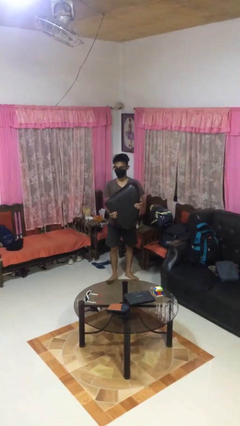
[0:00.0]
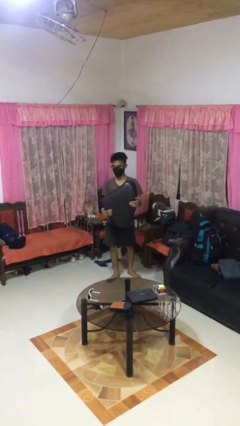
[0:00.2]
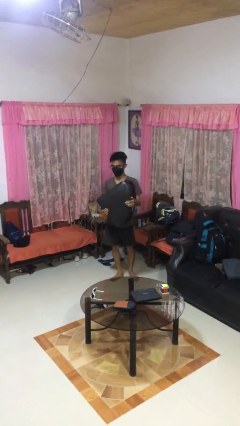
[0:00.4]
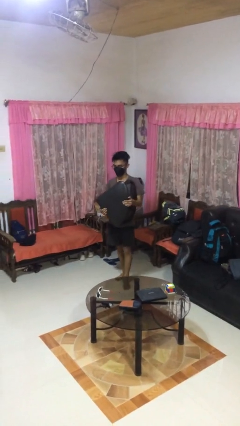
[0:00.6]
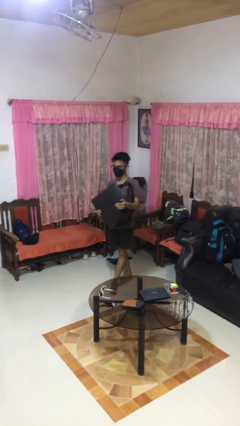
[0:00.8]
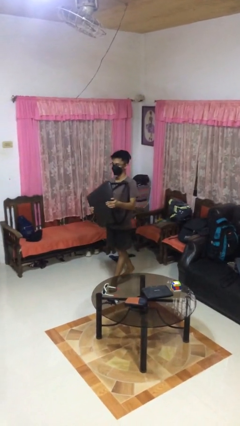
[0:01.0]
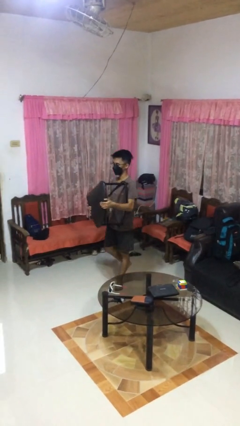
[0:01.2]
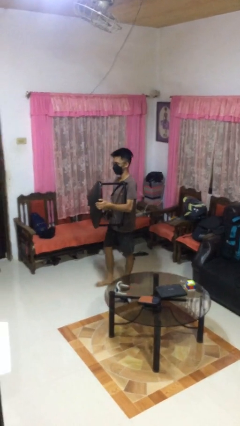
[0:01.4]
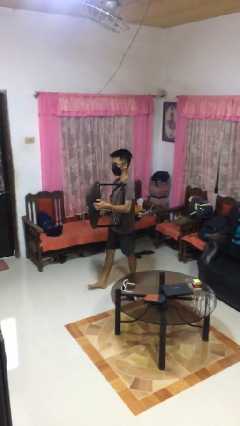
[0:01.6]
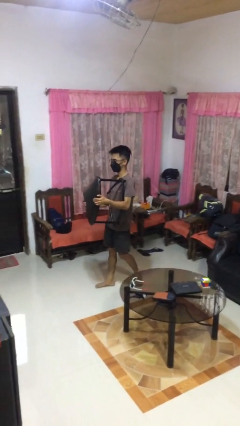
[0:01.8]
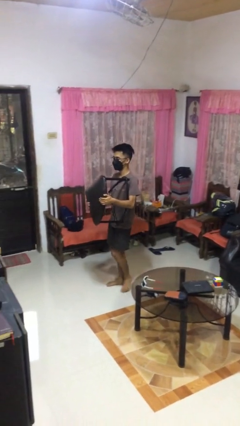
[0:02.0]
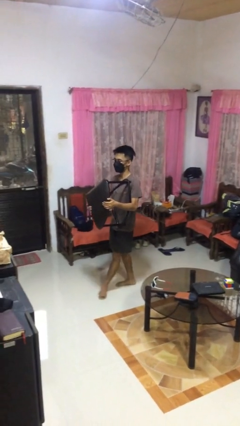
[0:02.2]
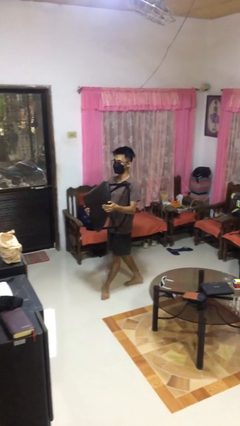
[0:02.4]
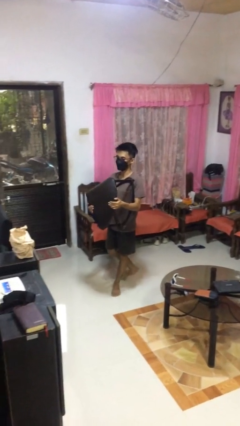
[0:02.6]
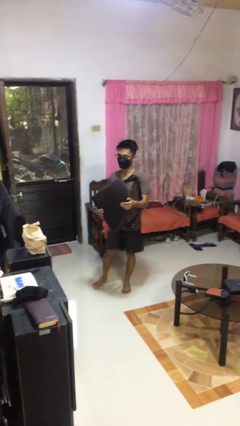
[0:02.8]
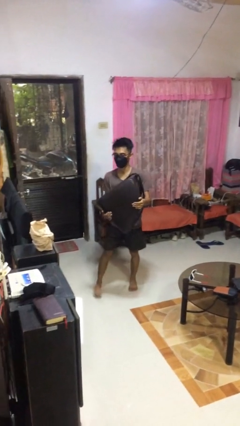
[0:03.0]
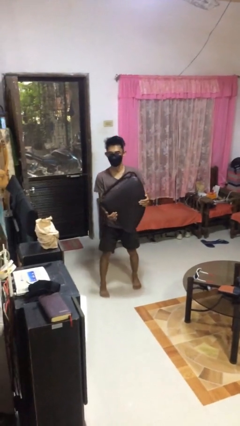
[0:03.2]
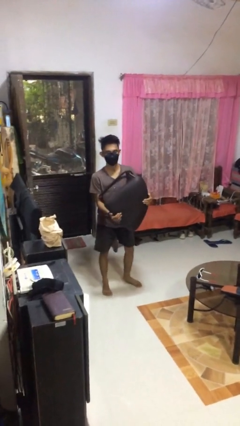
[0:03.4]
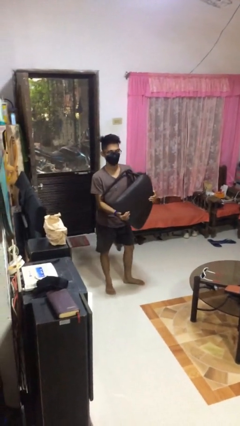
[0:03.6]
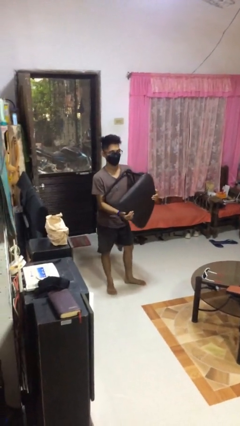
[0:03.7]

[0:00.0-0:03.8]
person carries furniture

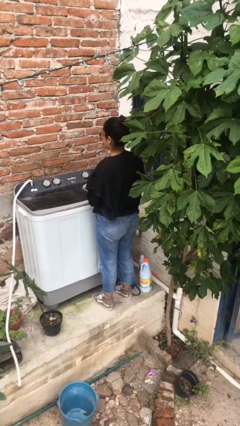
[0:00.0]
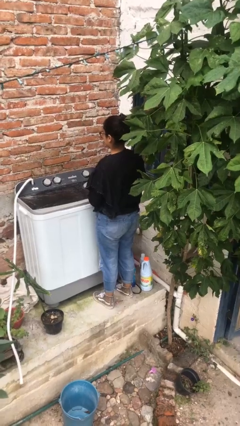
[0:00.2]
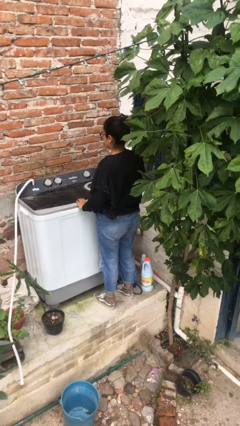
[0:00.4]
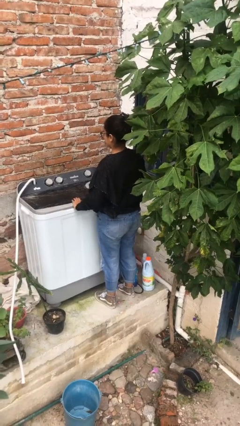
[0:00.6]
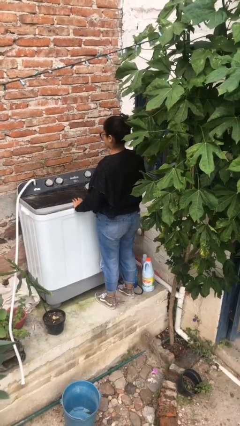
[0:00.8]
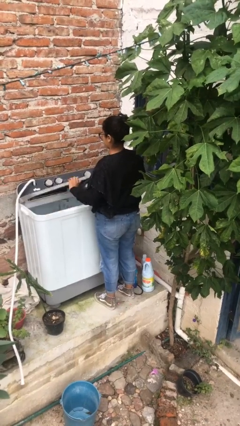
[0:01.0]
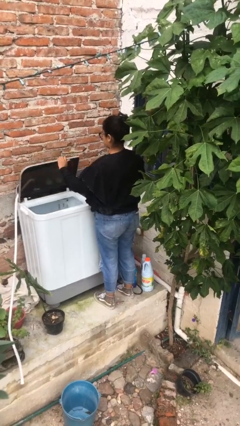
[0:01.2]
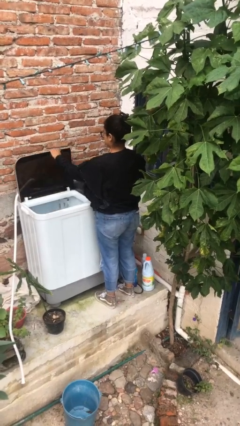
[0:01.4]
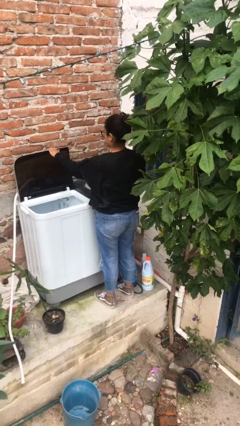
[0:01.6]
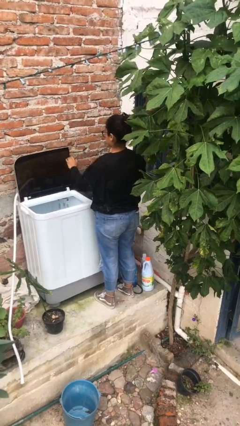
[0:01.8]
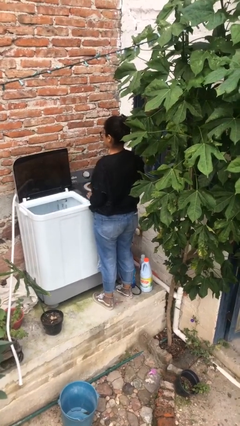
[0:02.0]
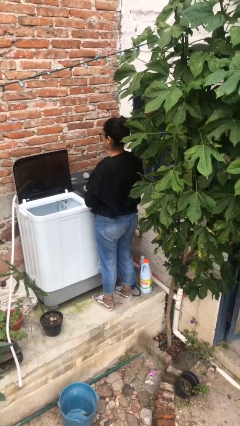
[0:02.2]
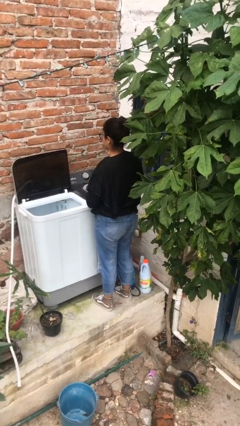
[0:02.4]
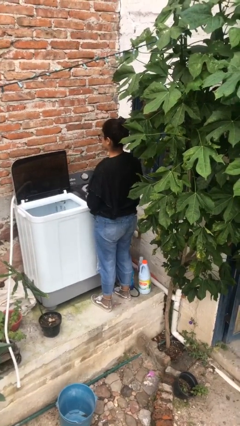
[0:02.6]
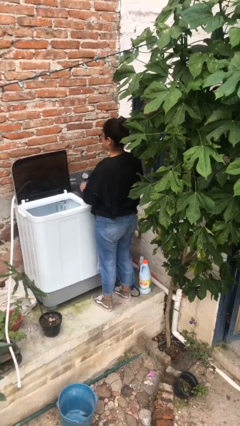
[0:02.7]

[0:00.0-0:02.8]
person opens clothes washer

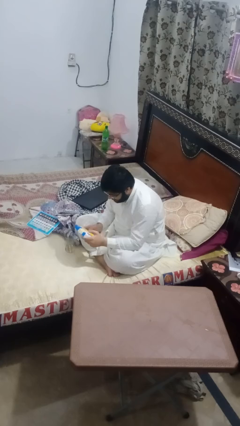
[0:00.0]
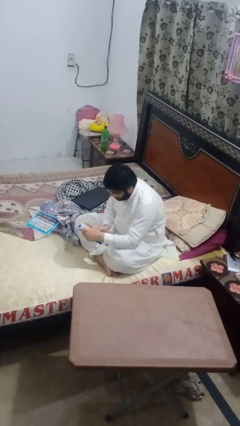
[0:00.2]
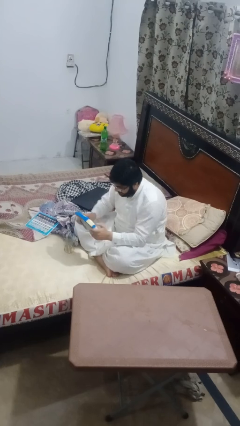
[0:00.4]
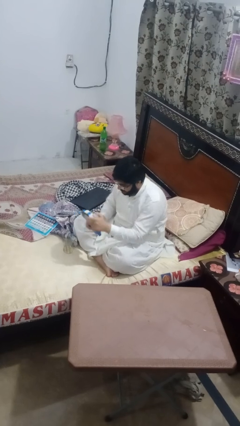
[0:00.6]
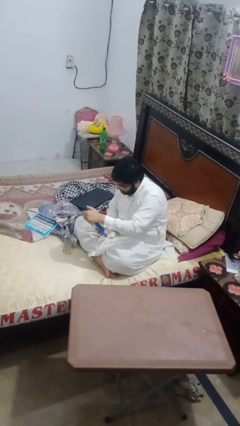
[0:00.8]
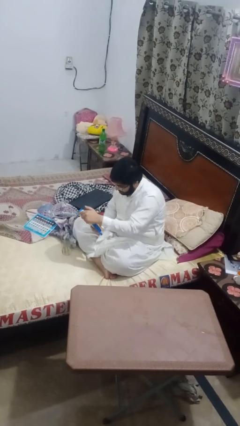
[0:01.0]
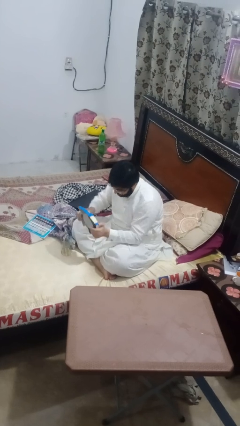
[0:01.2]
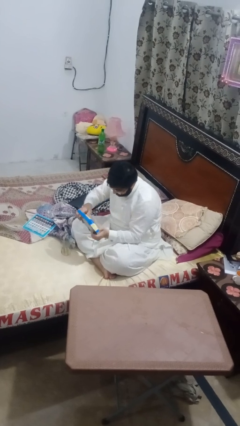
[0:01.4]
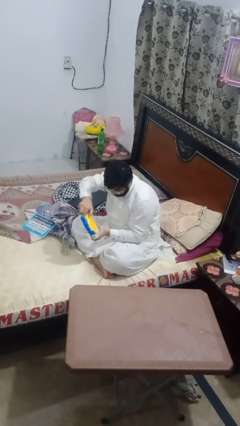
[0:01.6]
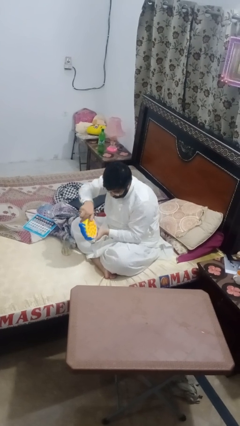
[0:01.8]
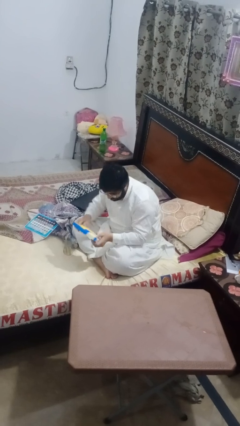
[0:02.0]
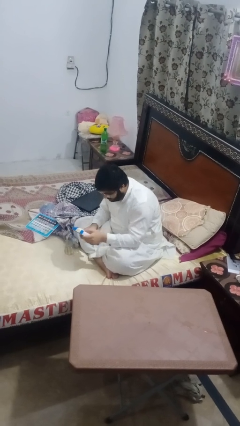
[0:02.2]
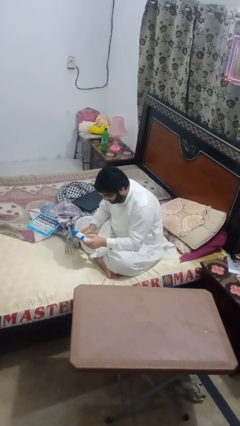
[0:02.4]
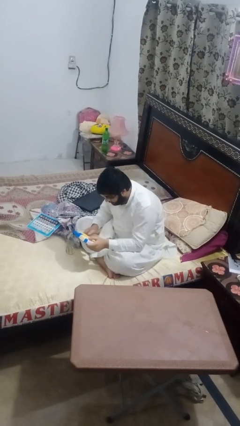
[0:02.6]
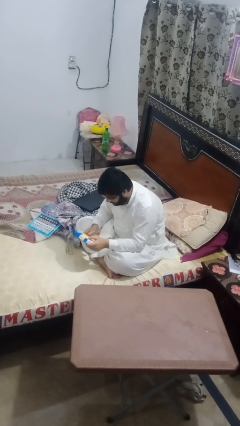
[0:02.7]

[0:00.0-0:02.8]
person interacts with handheld game

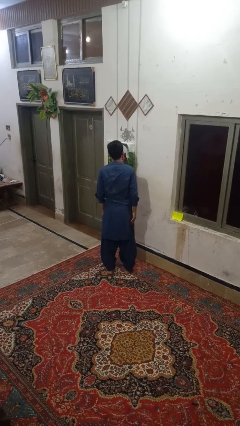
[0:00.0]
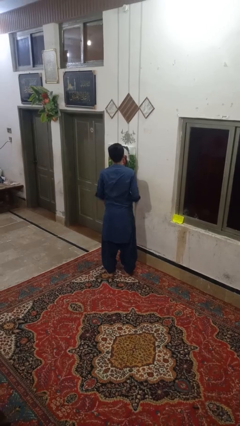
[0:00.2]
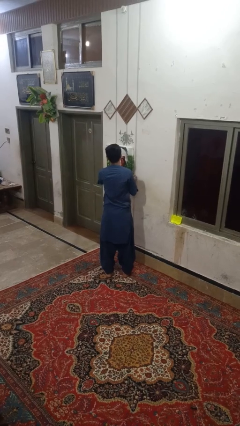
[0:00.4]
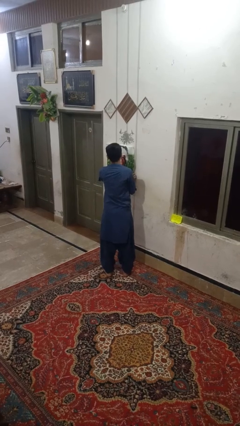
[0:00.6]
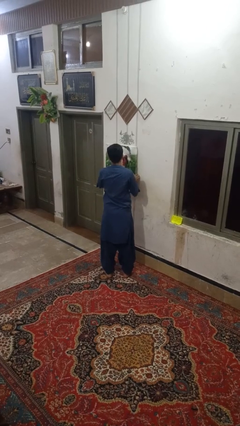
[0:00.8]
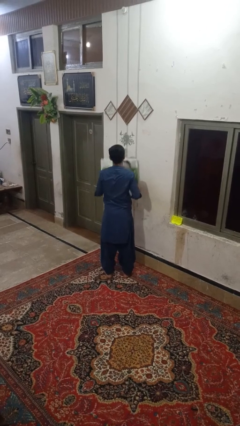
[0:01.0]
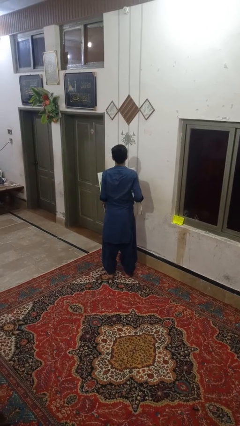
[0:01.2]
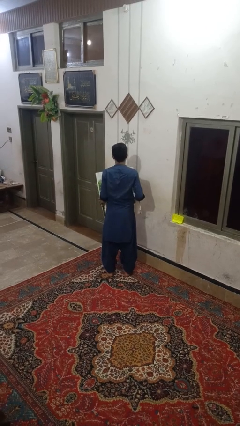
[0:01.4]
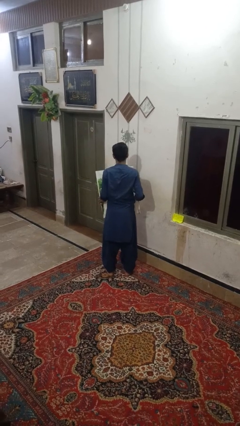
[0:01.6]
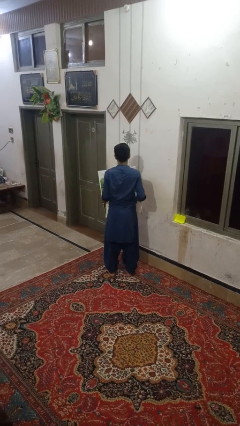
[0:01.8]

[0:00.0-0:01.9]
person takes down picture frame

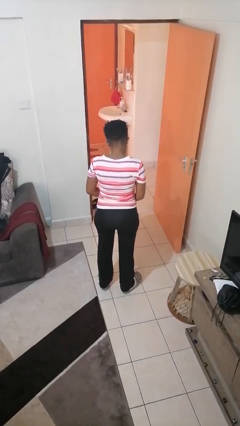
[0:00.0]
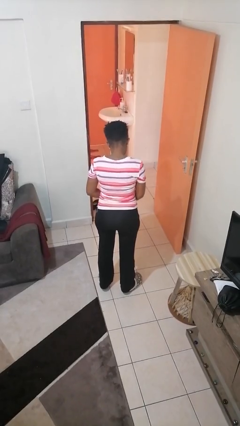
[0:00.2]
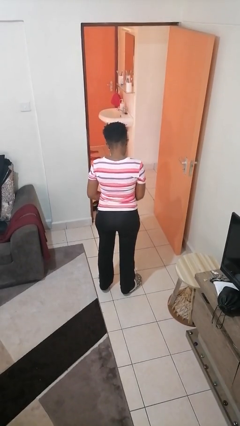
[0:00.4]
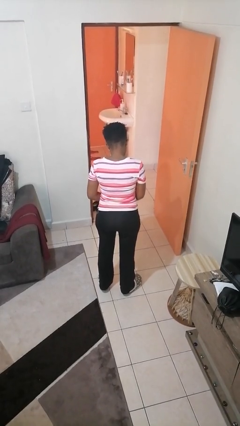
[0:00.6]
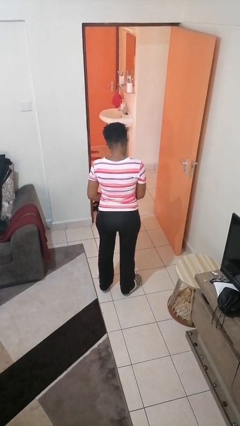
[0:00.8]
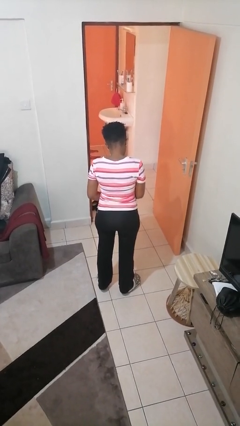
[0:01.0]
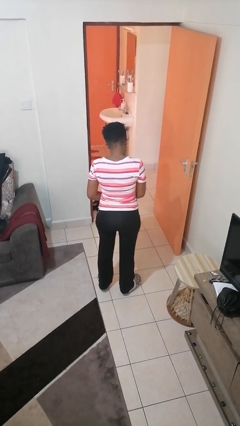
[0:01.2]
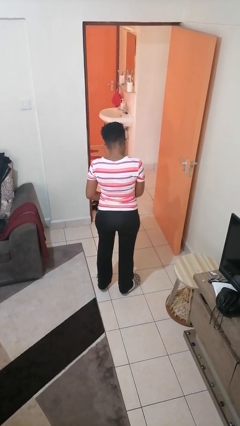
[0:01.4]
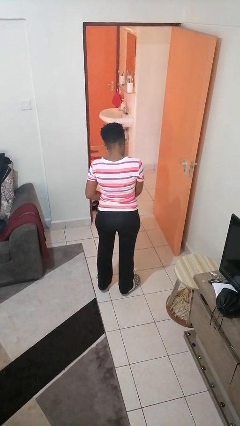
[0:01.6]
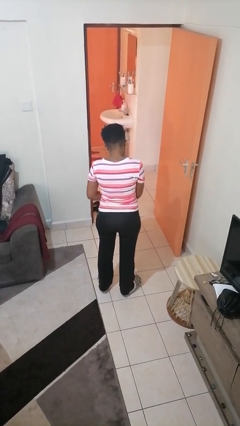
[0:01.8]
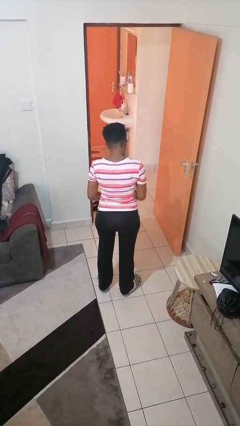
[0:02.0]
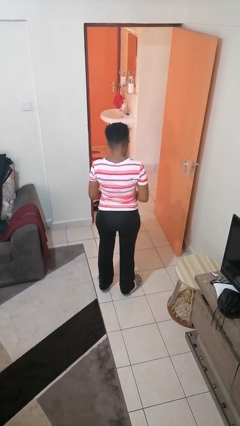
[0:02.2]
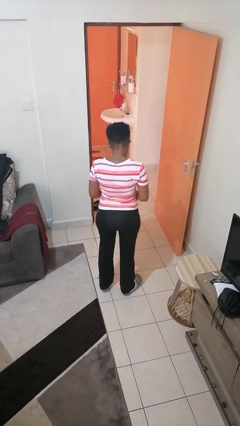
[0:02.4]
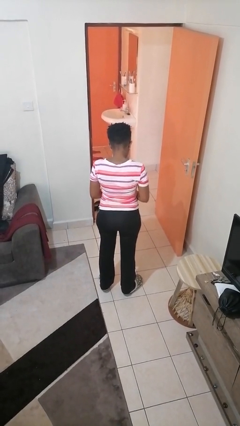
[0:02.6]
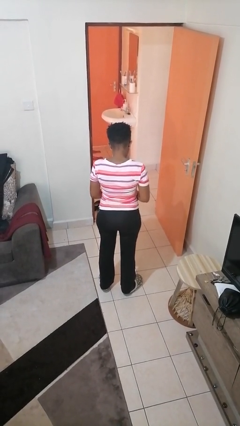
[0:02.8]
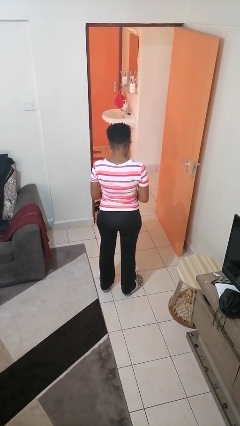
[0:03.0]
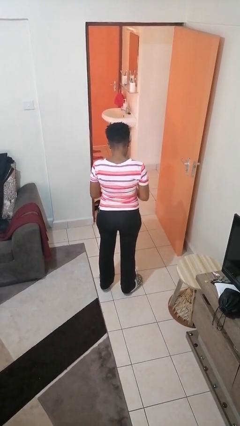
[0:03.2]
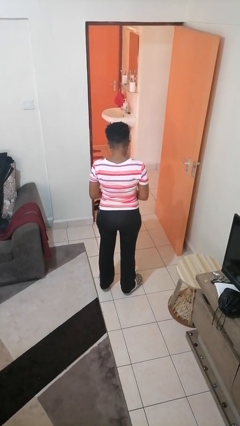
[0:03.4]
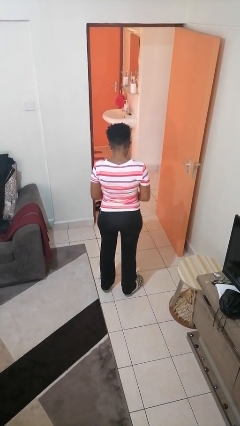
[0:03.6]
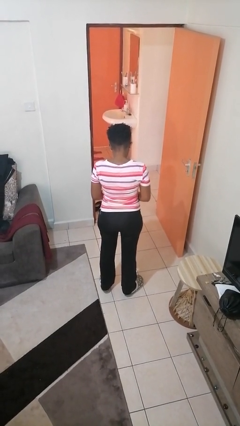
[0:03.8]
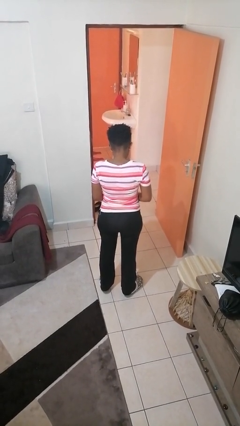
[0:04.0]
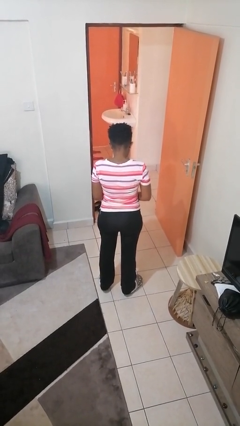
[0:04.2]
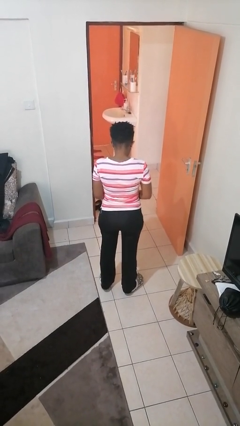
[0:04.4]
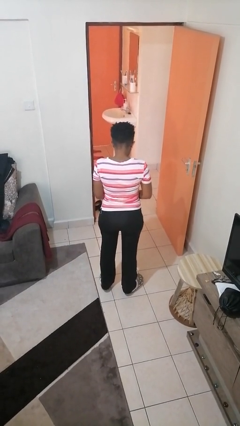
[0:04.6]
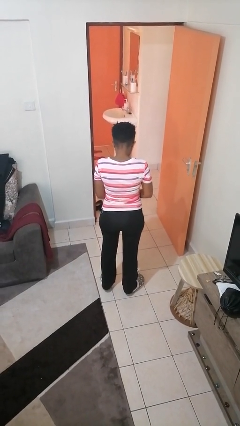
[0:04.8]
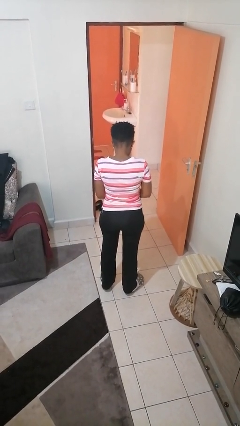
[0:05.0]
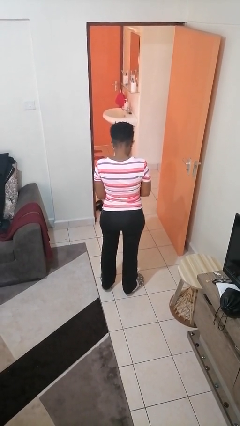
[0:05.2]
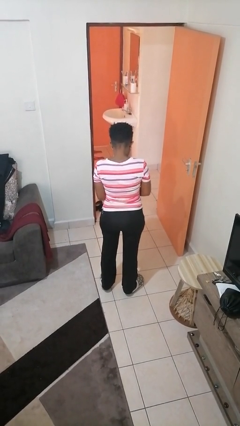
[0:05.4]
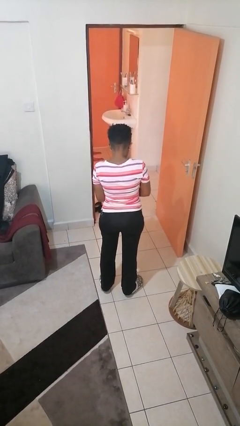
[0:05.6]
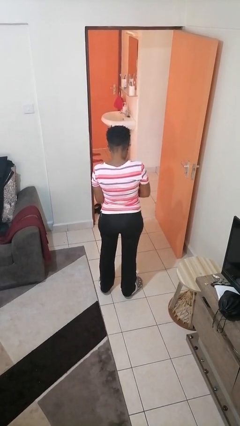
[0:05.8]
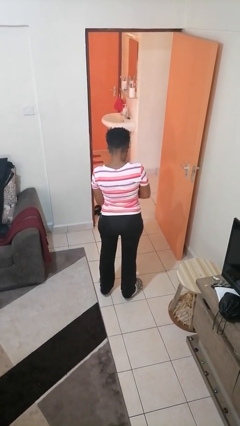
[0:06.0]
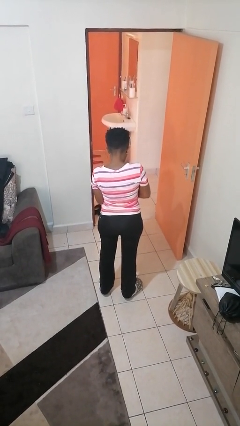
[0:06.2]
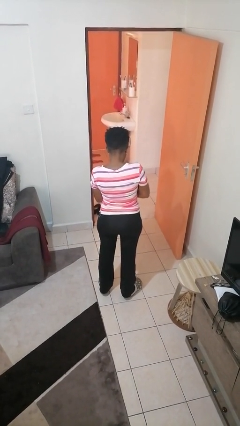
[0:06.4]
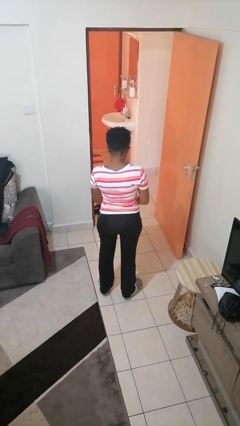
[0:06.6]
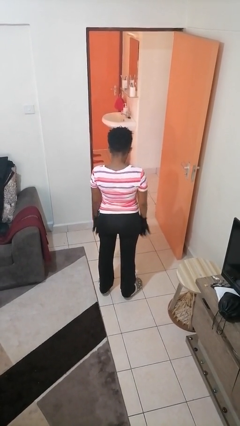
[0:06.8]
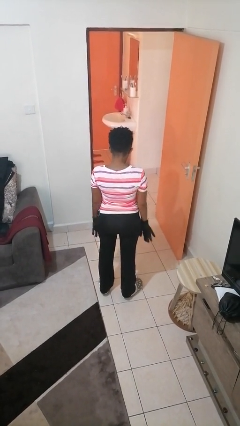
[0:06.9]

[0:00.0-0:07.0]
person puts on gloves
